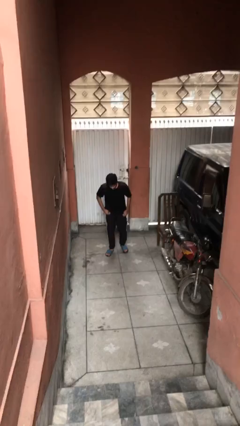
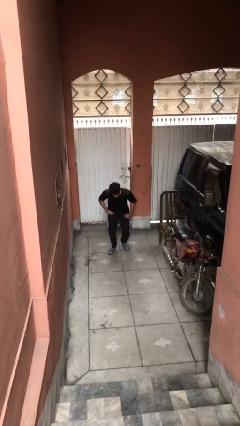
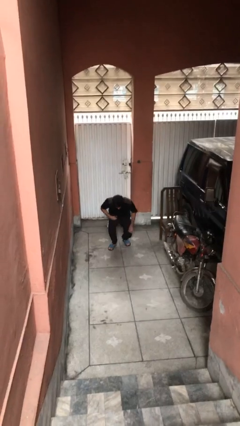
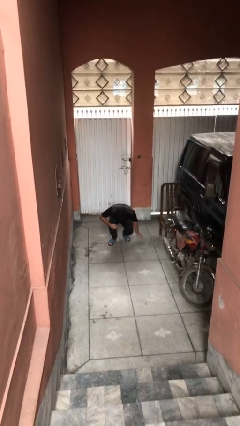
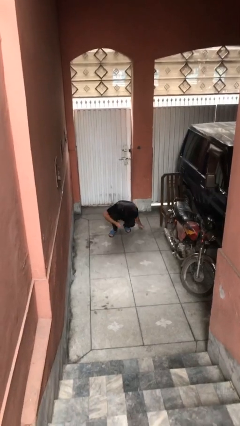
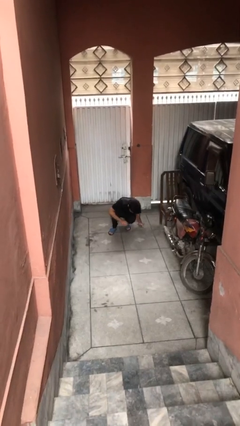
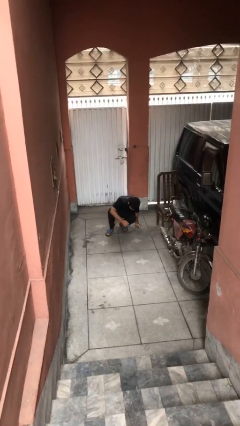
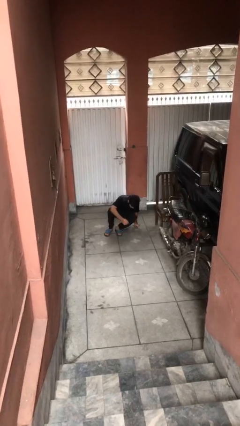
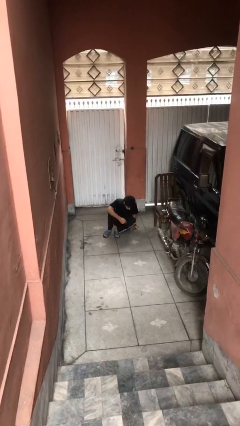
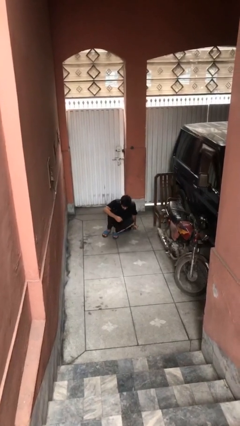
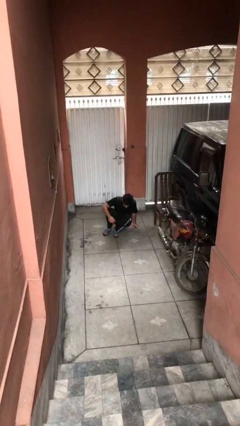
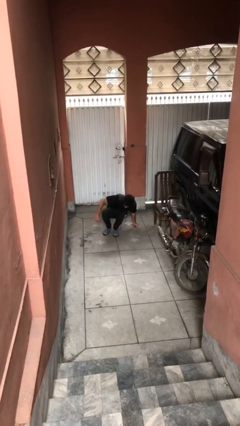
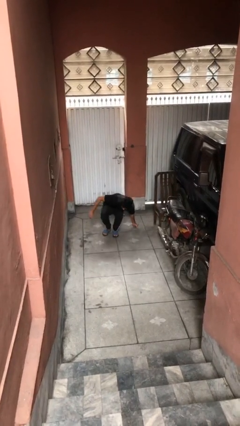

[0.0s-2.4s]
person sits down

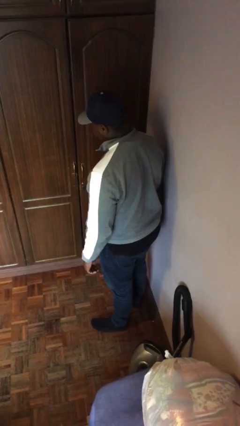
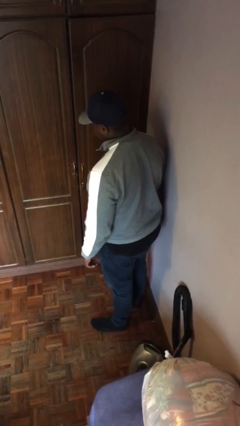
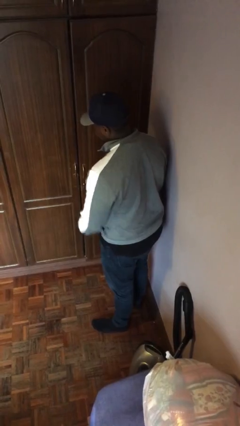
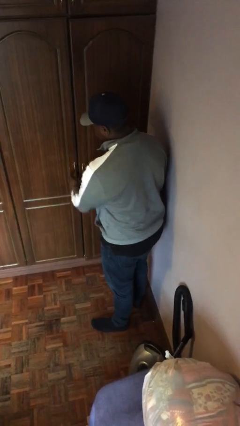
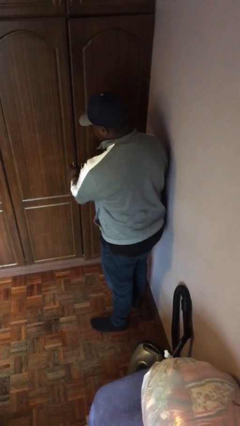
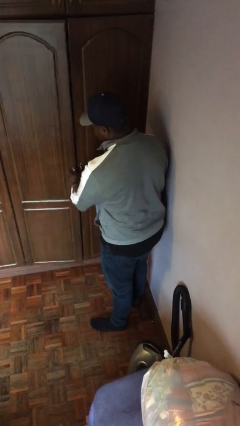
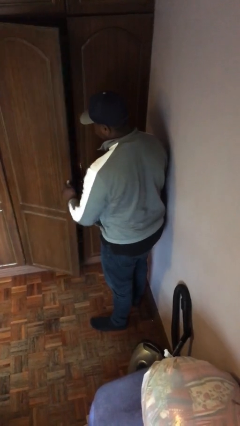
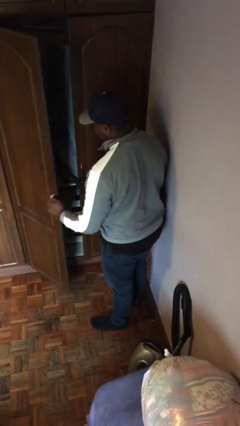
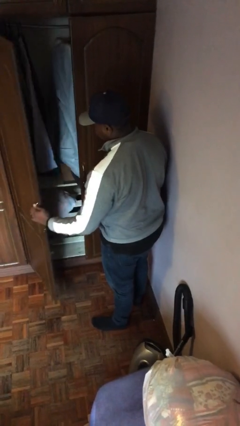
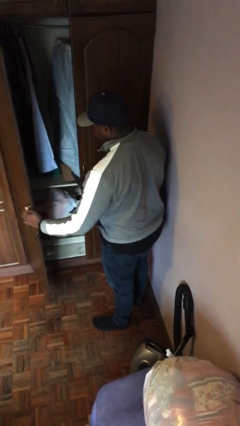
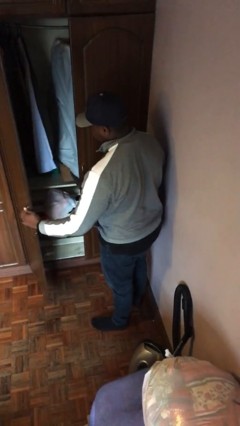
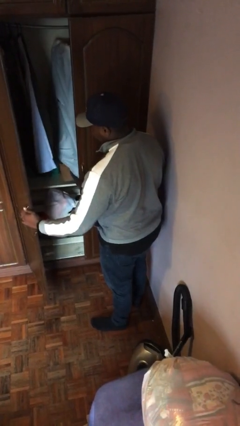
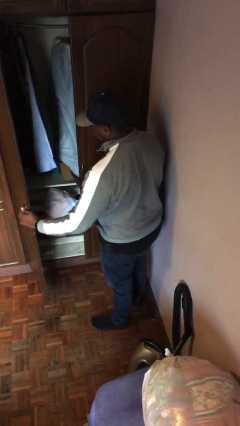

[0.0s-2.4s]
person opens closet door

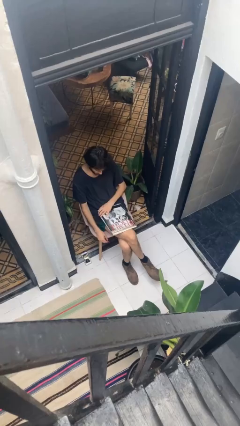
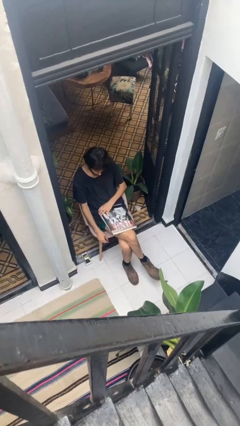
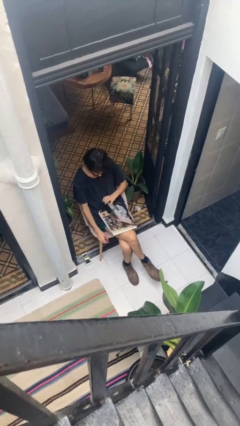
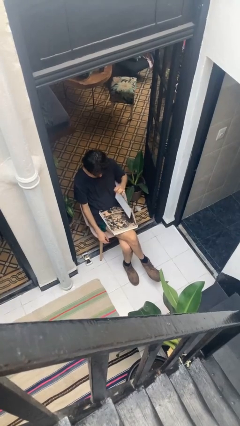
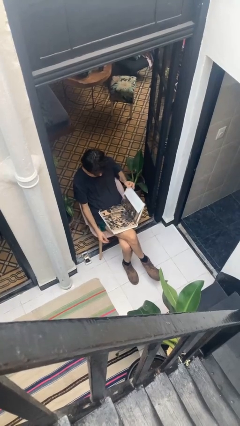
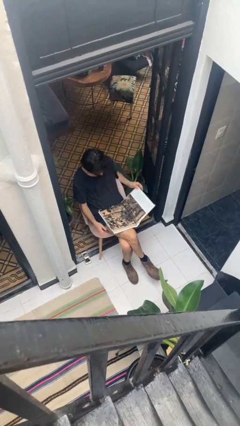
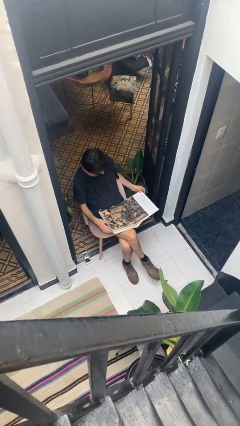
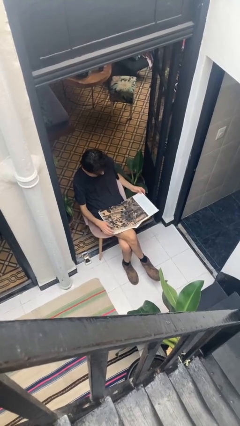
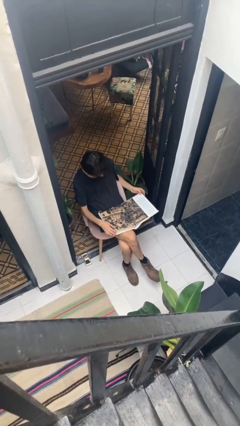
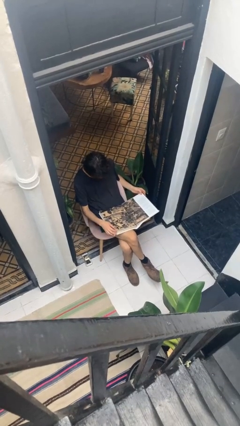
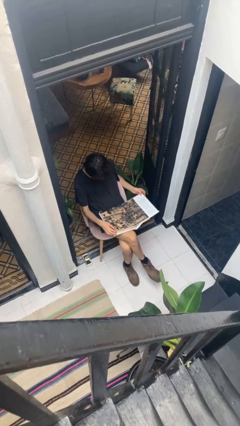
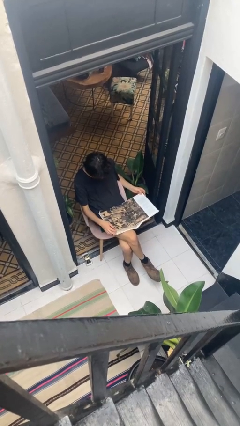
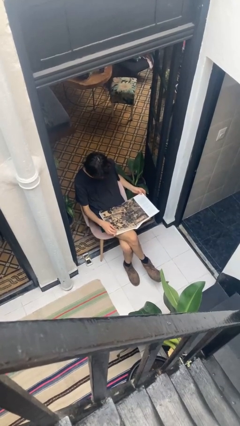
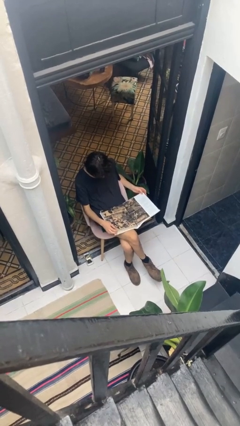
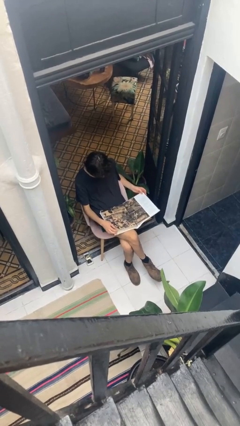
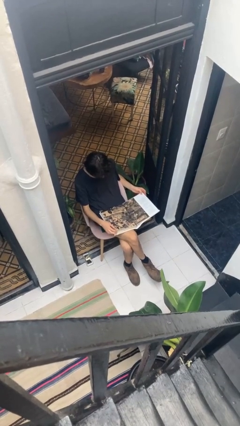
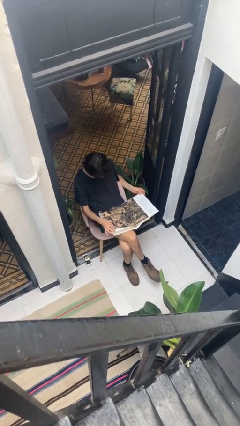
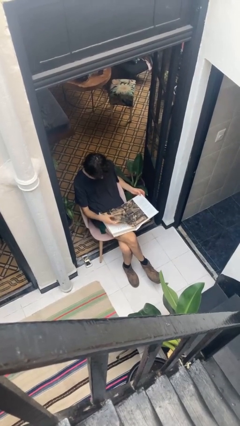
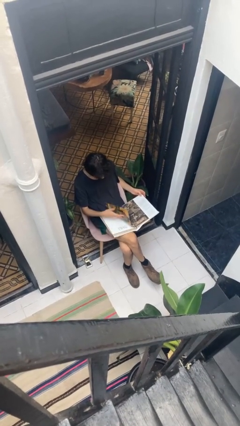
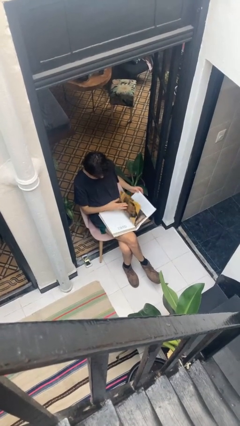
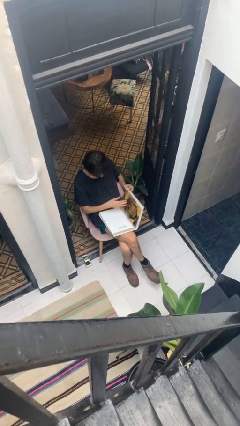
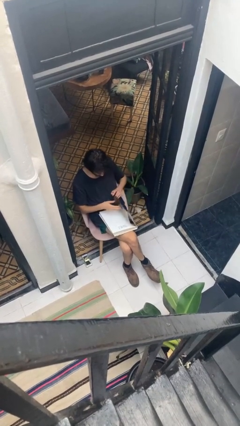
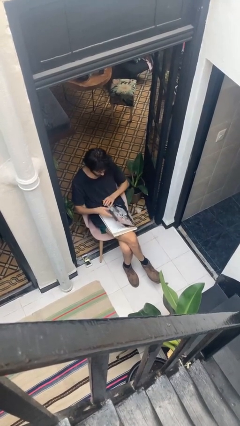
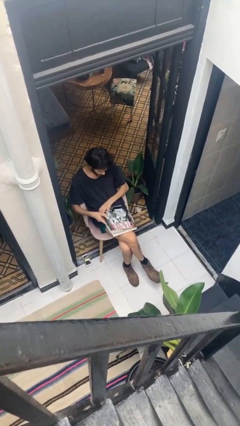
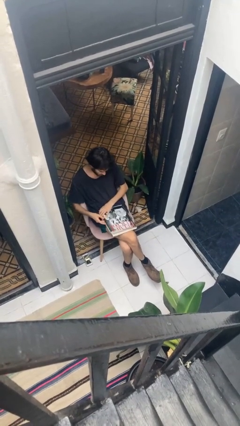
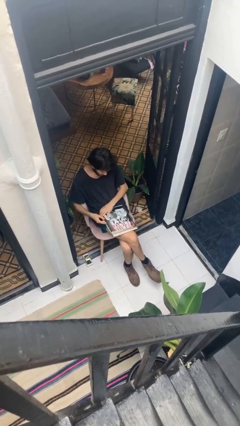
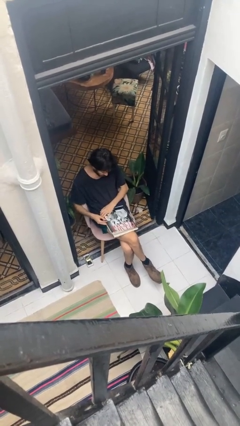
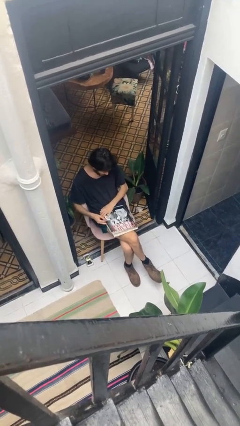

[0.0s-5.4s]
person reads document

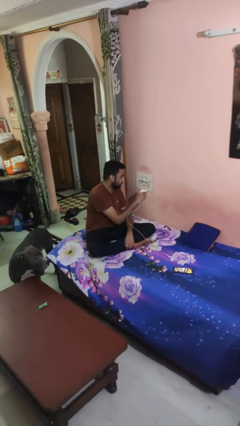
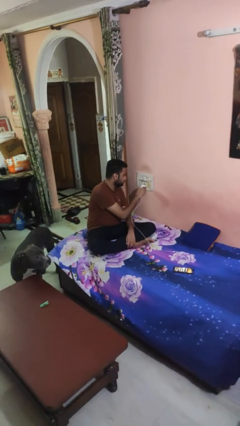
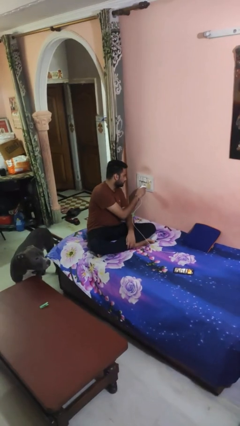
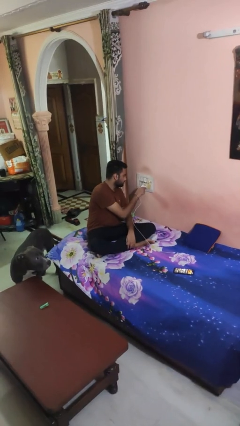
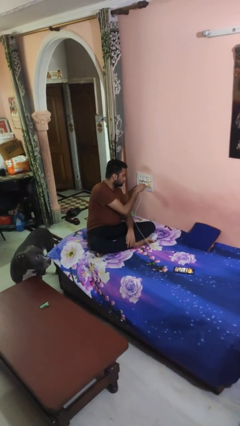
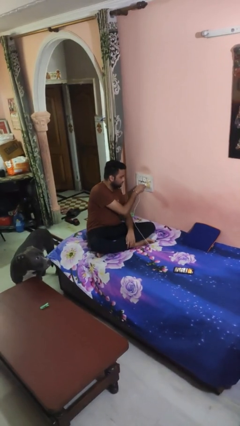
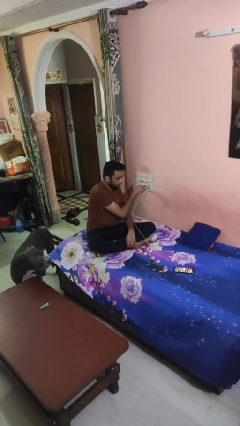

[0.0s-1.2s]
person plugs into electrical socket

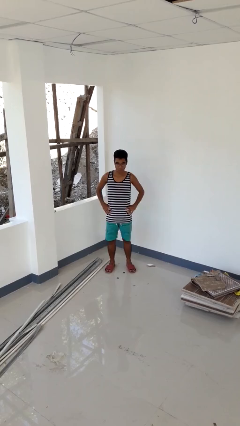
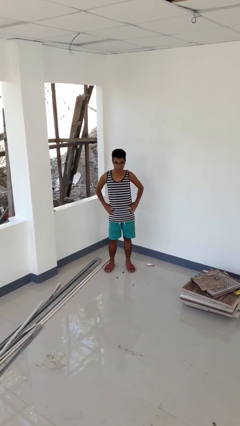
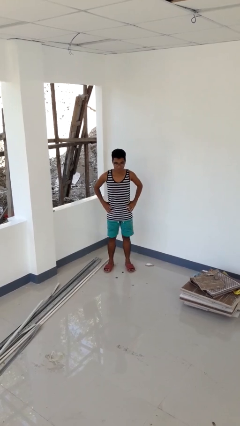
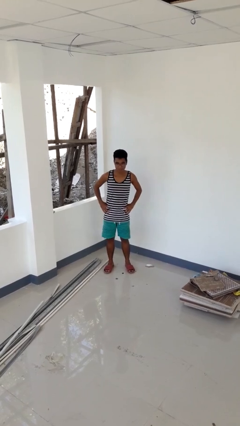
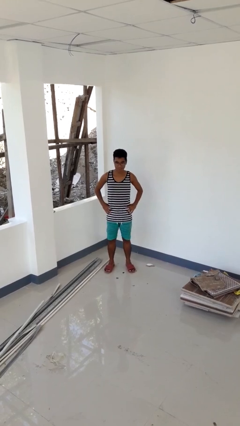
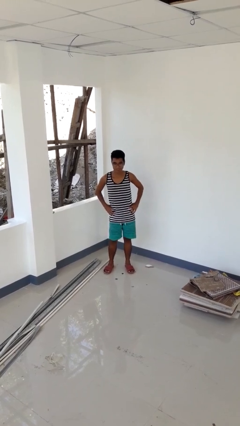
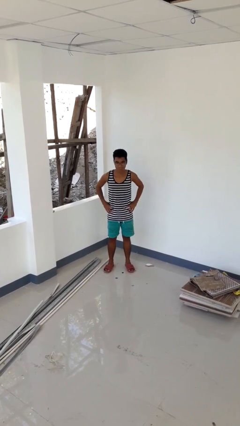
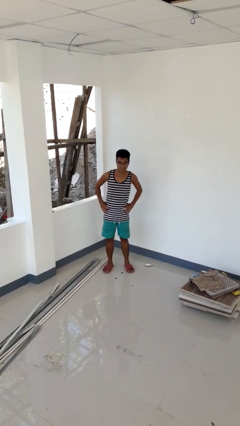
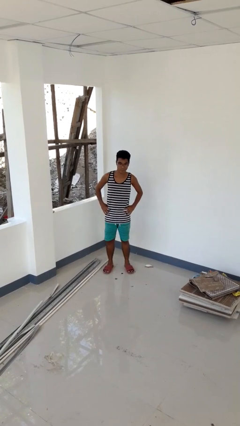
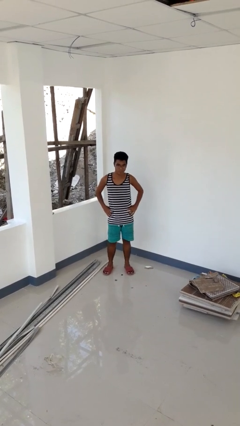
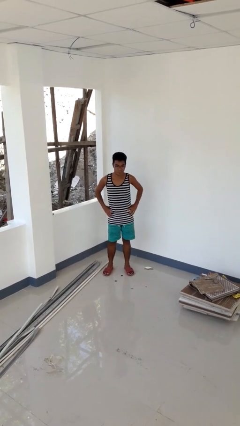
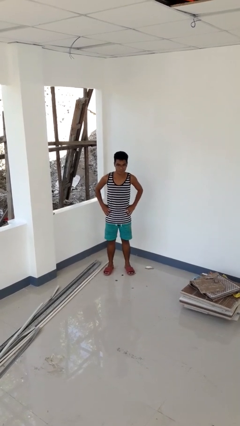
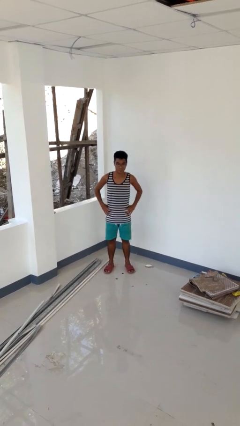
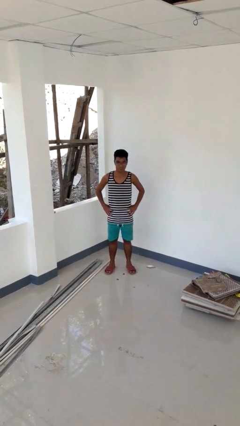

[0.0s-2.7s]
person wiggles hips

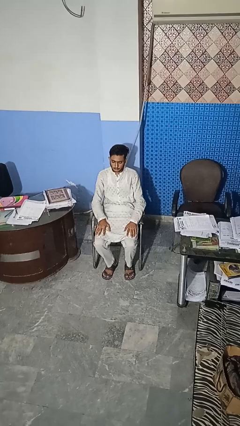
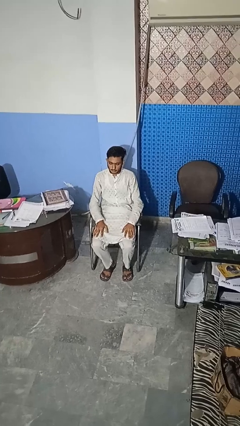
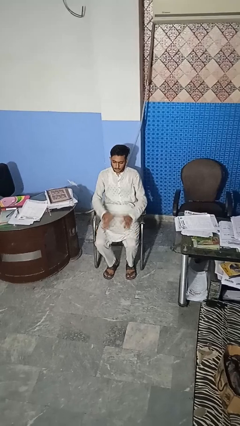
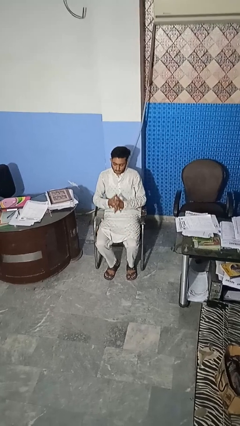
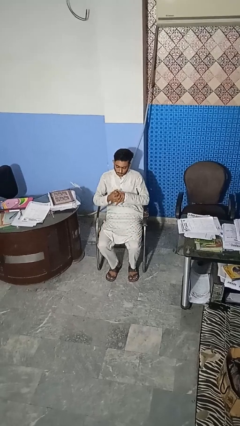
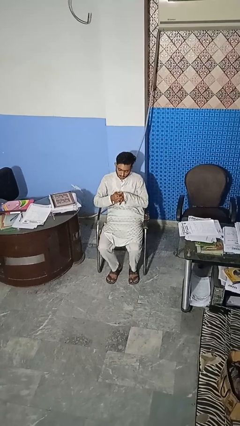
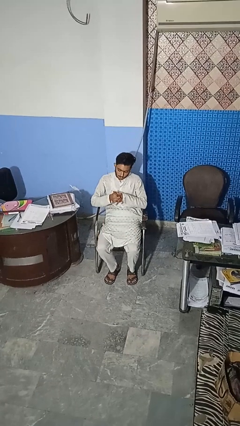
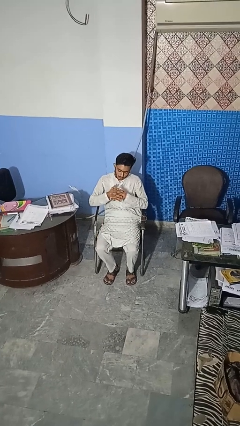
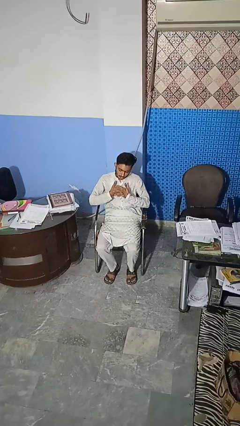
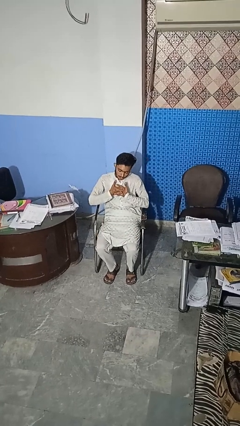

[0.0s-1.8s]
person cracks knuckles

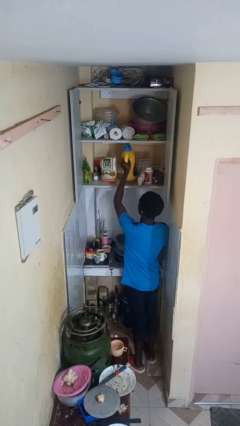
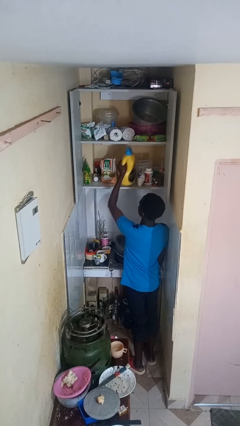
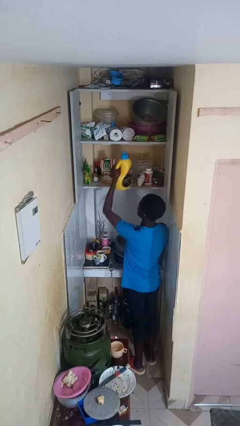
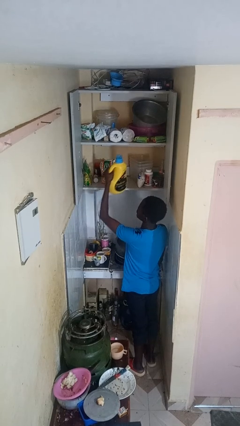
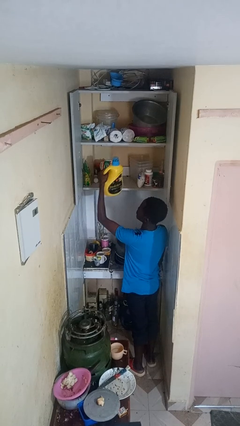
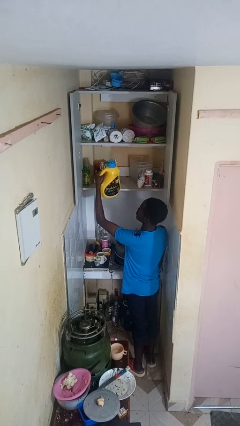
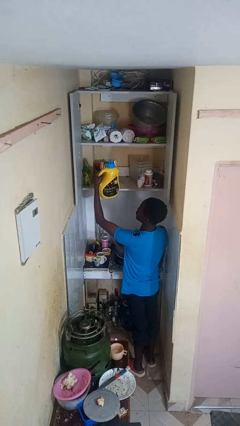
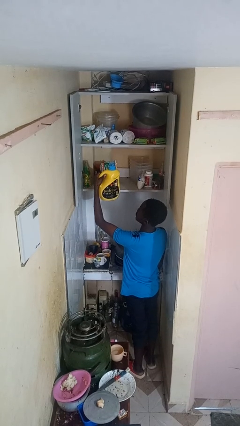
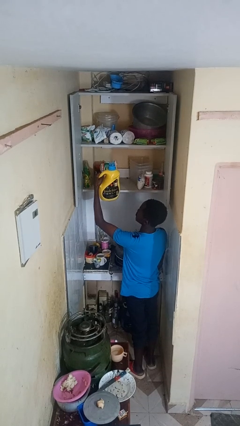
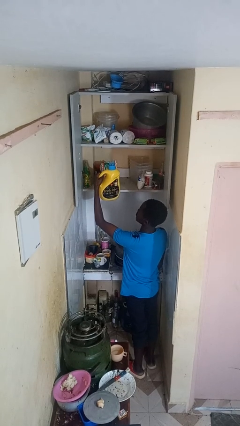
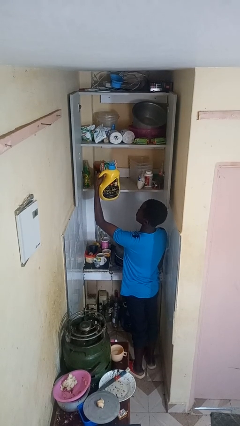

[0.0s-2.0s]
person takes object from cabinet
